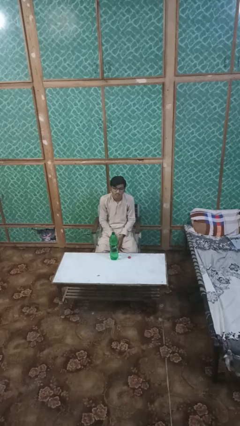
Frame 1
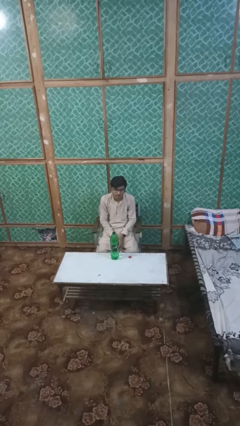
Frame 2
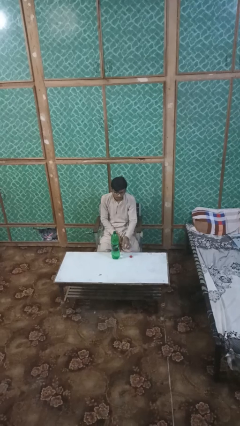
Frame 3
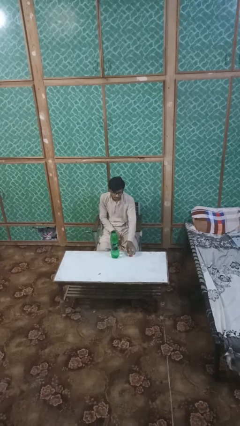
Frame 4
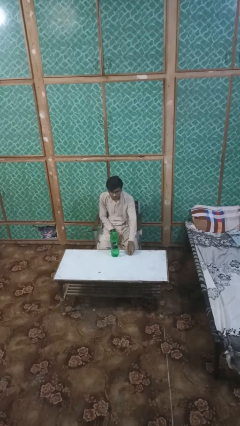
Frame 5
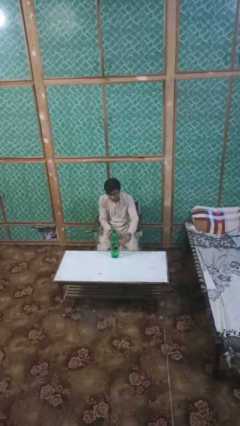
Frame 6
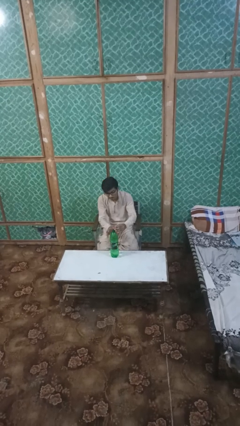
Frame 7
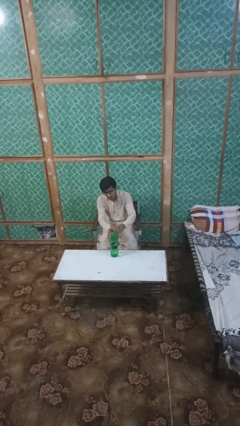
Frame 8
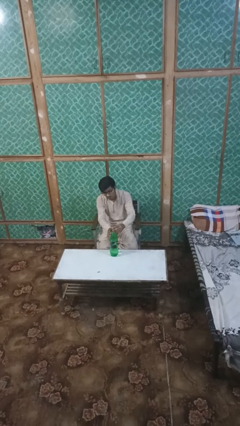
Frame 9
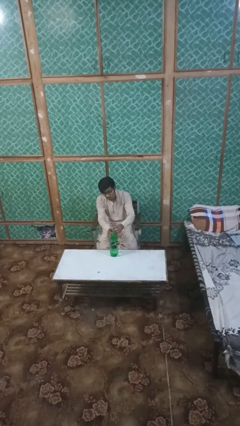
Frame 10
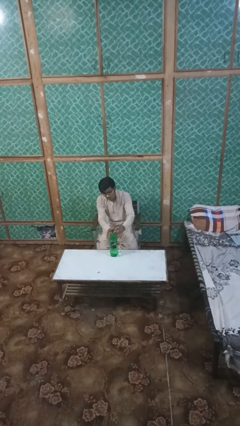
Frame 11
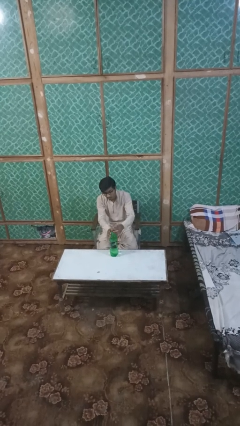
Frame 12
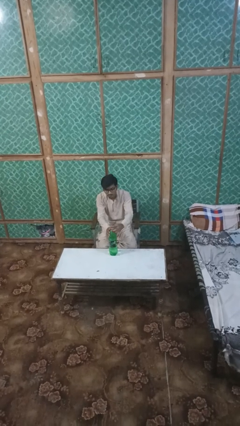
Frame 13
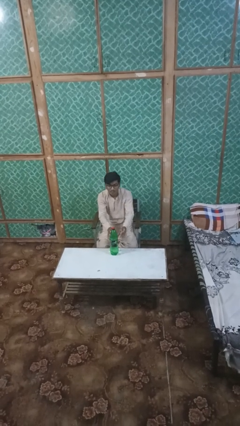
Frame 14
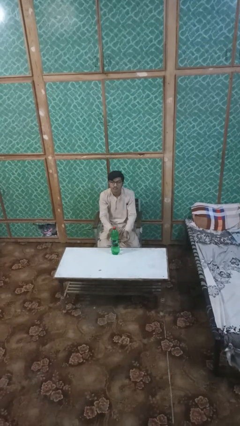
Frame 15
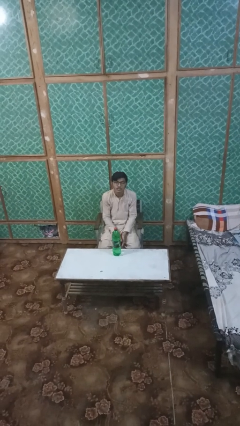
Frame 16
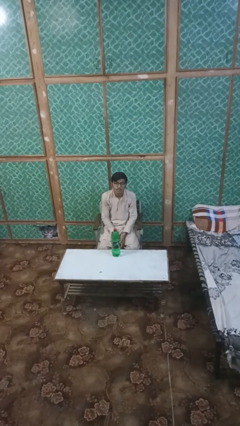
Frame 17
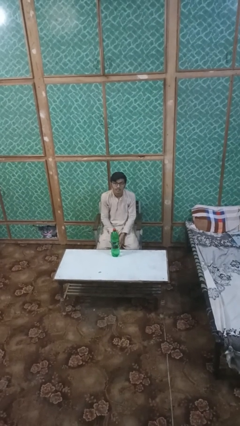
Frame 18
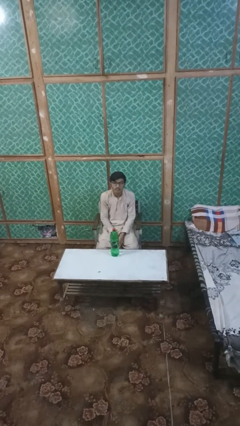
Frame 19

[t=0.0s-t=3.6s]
person screws lid to bottle

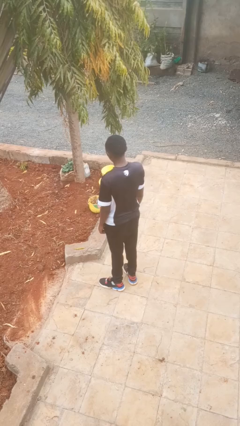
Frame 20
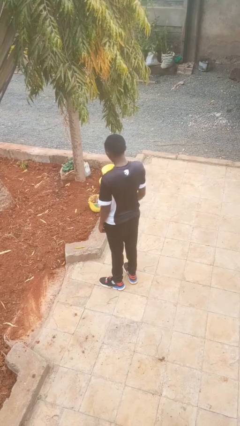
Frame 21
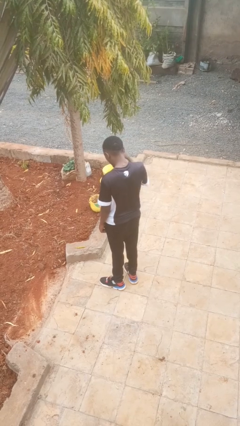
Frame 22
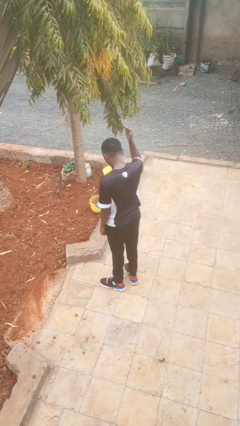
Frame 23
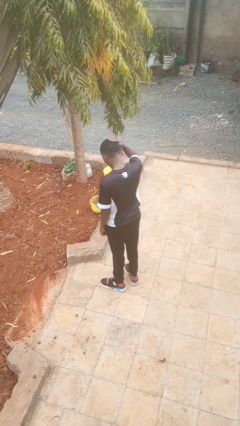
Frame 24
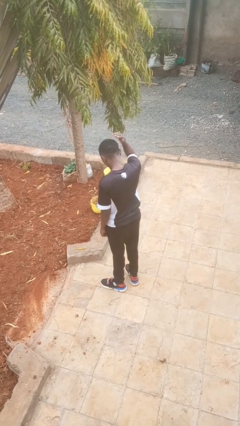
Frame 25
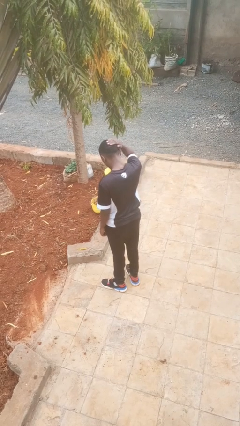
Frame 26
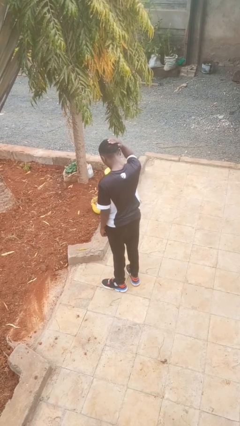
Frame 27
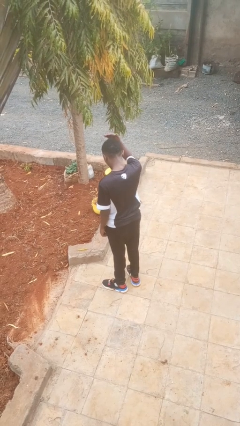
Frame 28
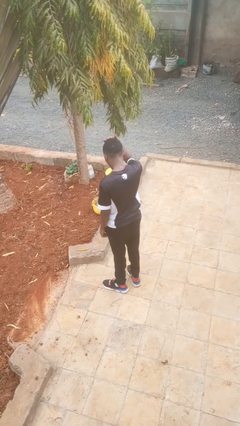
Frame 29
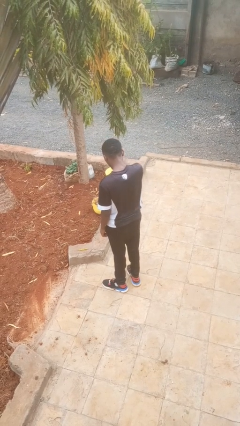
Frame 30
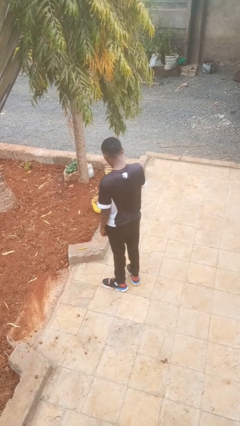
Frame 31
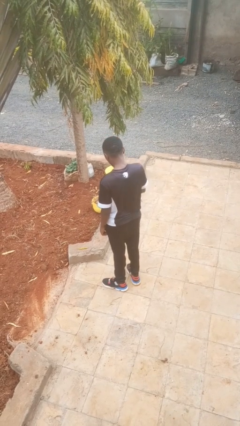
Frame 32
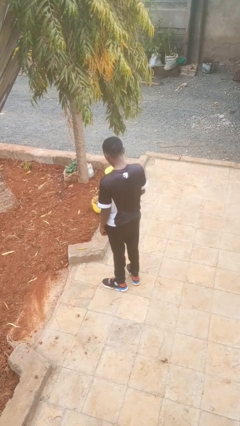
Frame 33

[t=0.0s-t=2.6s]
person pats head

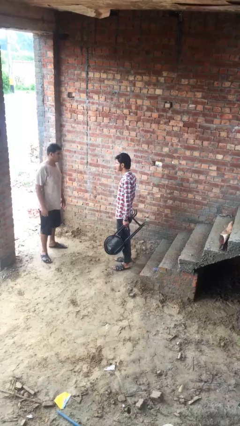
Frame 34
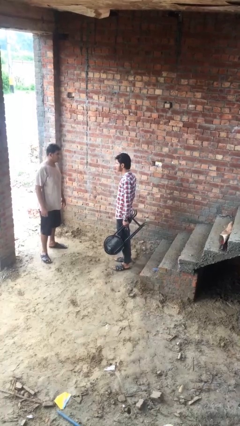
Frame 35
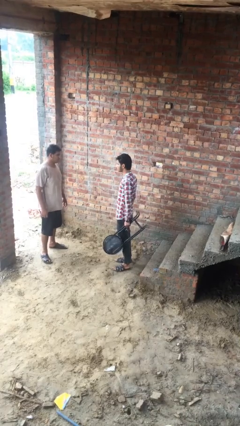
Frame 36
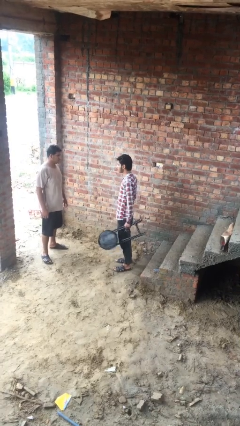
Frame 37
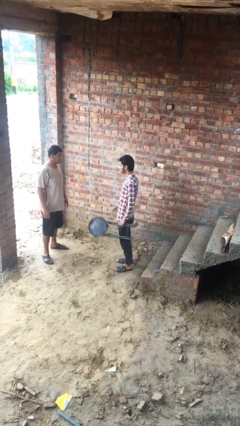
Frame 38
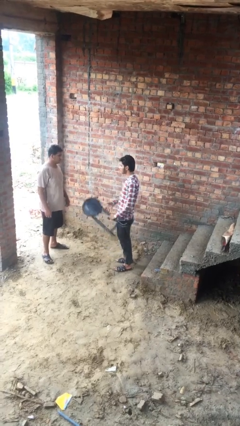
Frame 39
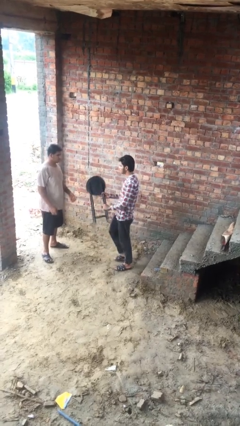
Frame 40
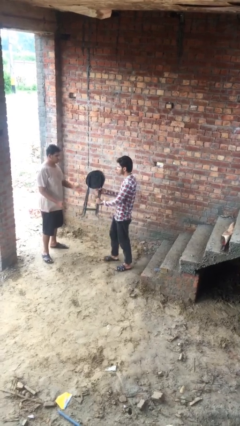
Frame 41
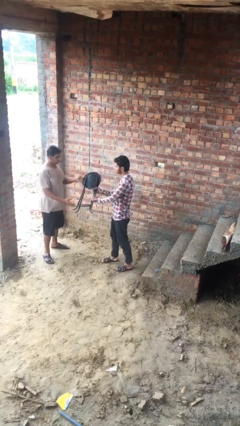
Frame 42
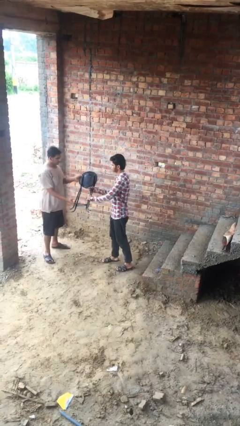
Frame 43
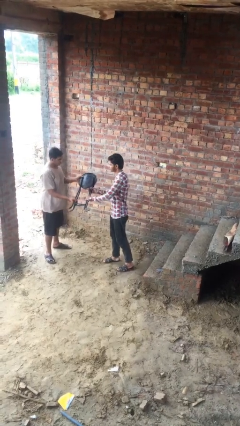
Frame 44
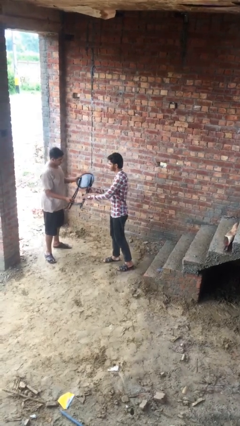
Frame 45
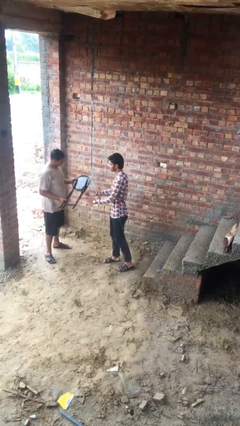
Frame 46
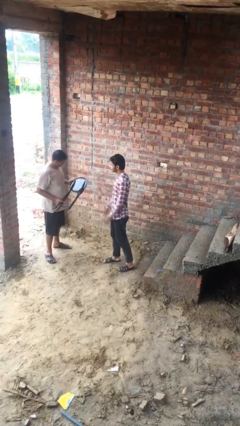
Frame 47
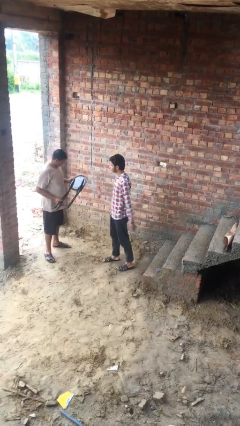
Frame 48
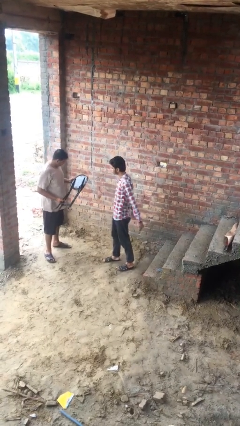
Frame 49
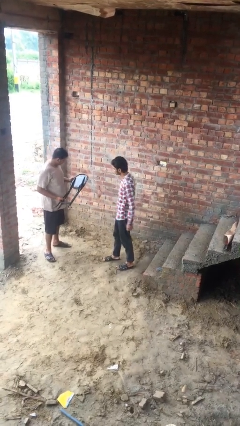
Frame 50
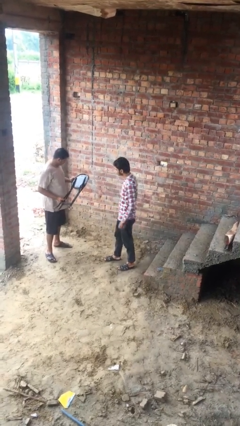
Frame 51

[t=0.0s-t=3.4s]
person transfers object to person

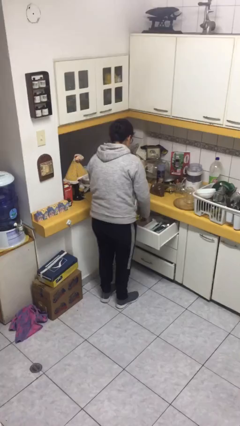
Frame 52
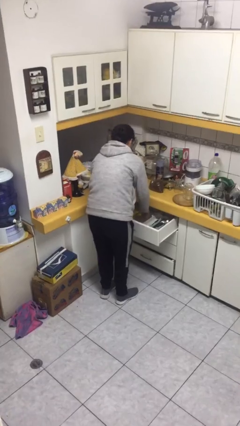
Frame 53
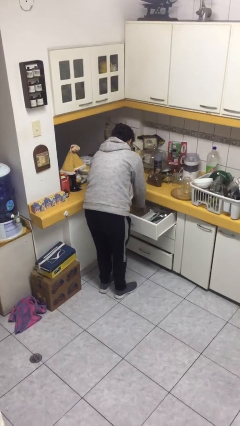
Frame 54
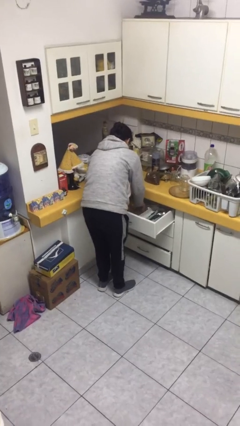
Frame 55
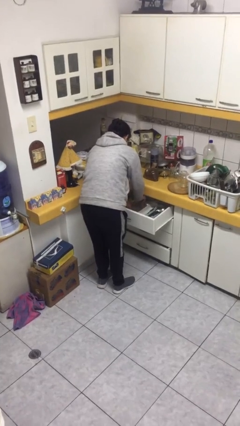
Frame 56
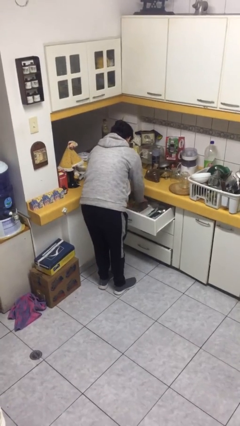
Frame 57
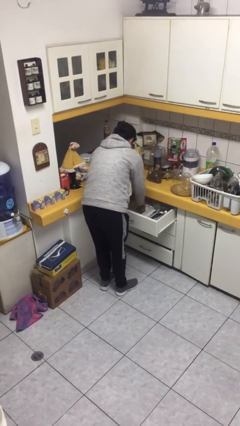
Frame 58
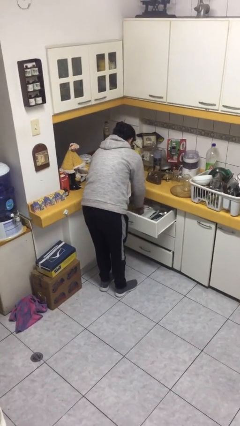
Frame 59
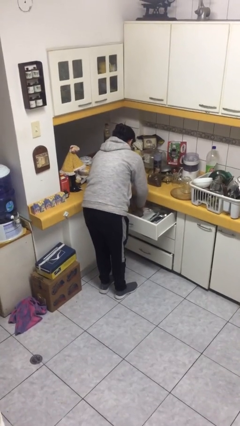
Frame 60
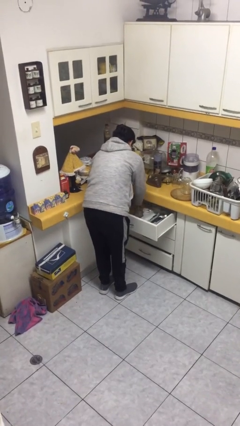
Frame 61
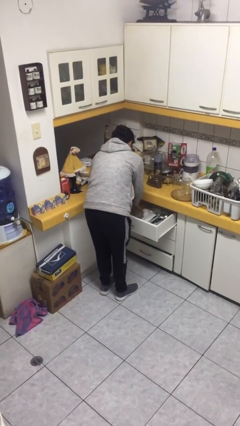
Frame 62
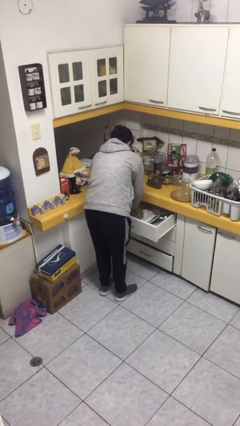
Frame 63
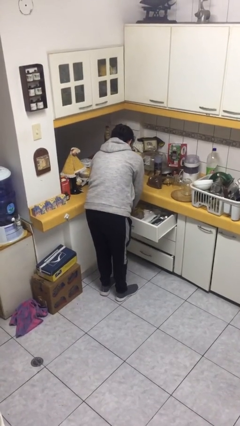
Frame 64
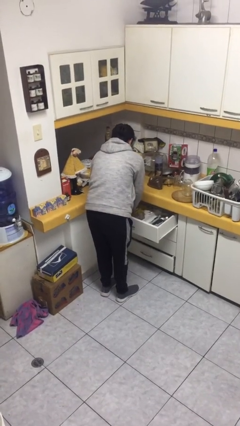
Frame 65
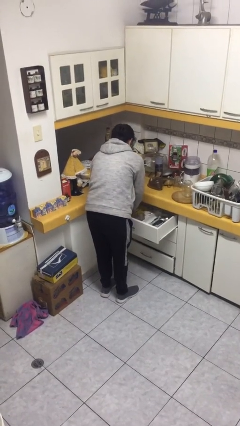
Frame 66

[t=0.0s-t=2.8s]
person searches in kitchen drawer

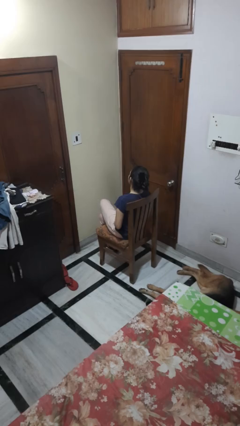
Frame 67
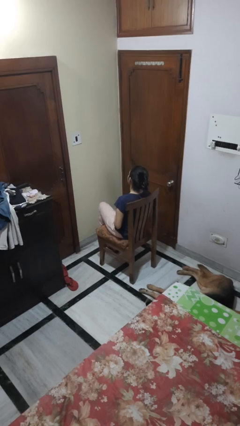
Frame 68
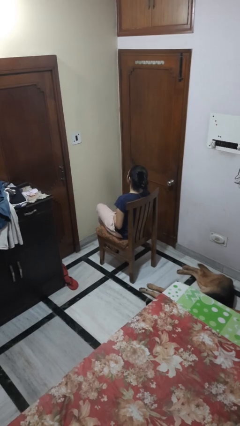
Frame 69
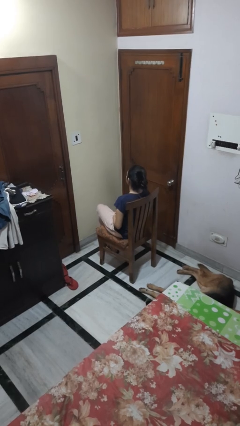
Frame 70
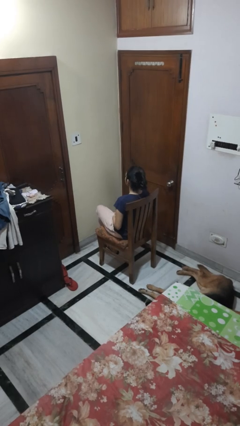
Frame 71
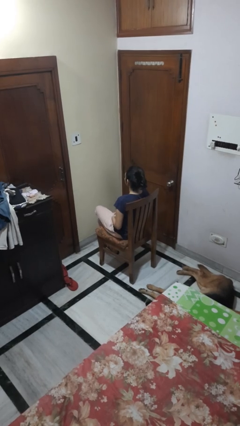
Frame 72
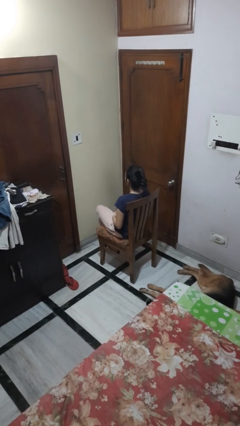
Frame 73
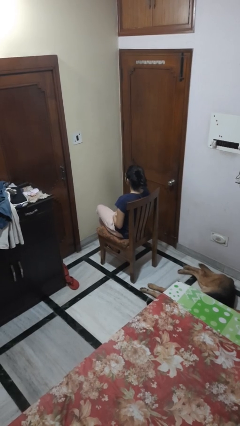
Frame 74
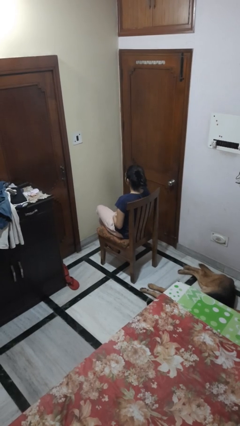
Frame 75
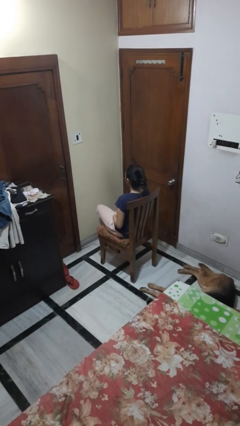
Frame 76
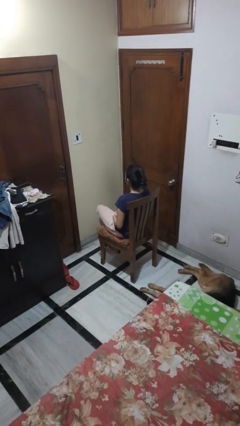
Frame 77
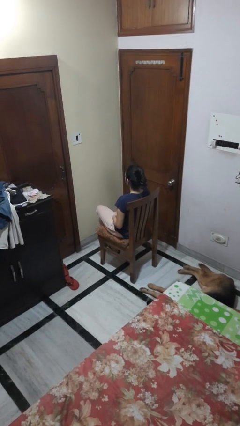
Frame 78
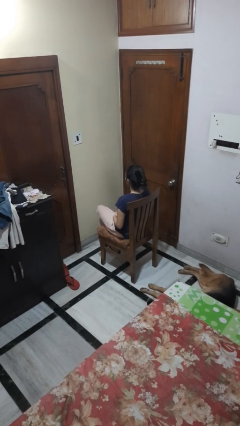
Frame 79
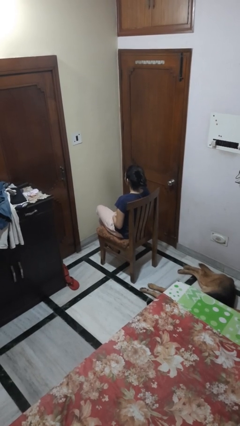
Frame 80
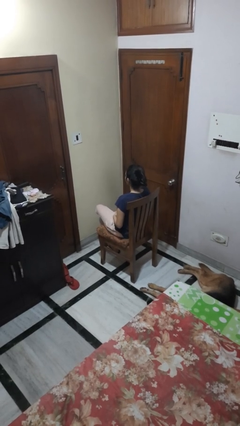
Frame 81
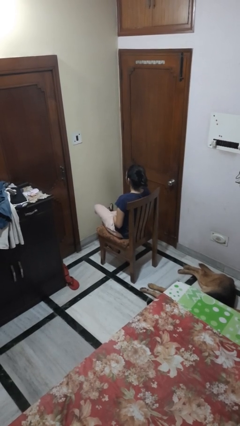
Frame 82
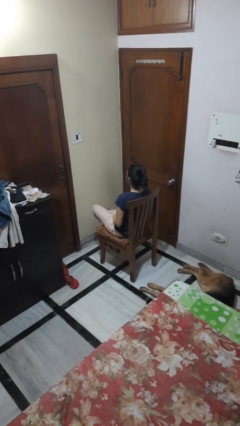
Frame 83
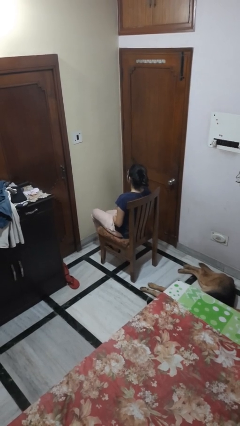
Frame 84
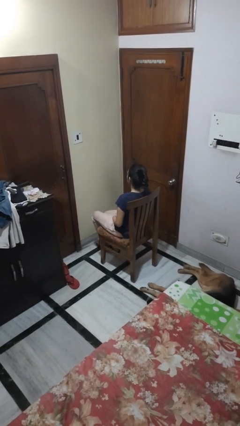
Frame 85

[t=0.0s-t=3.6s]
person crosses legs

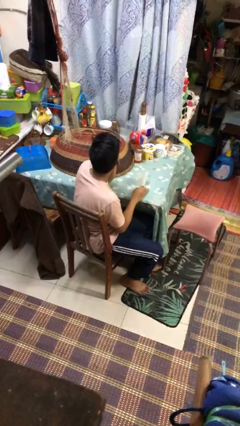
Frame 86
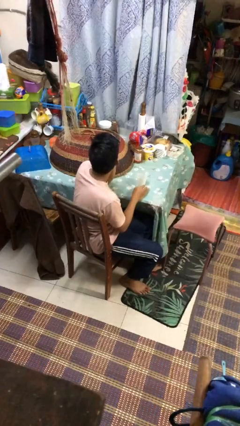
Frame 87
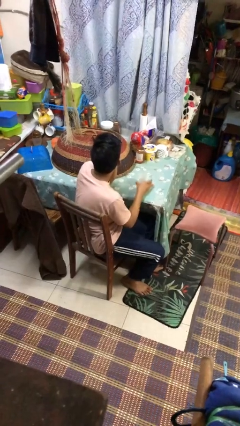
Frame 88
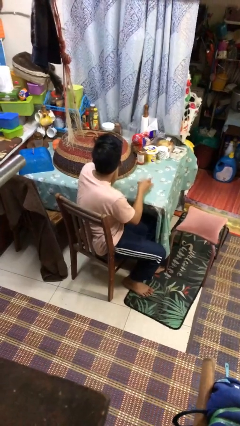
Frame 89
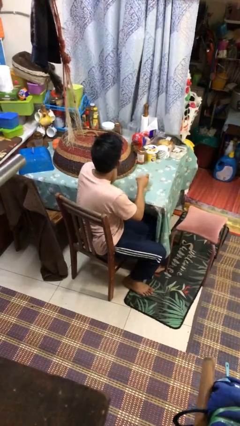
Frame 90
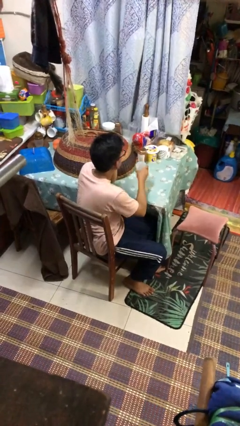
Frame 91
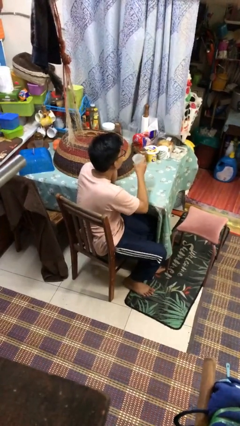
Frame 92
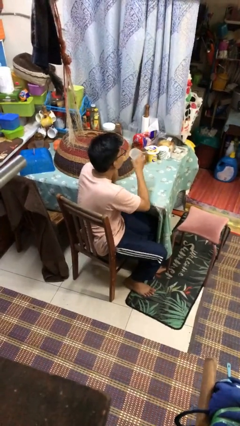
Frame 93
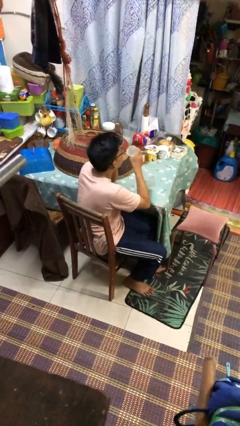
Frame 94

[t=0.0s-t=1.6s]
person picks up object from table
